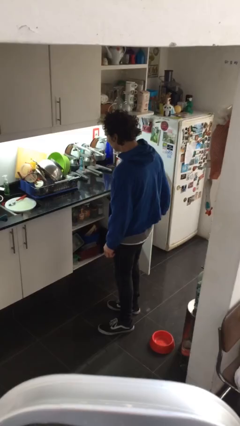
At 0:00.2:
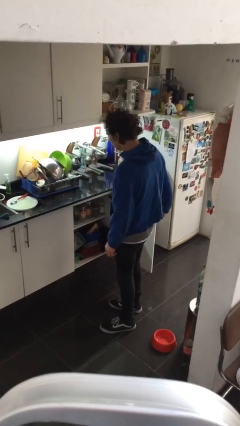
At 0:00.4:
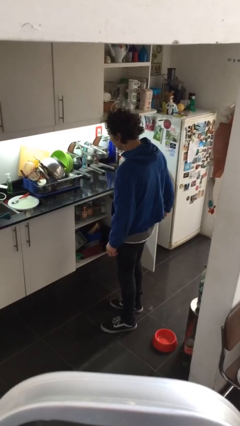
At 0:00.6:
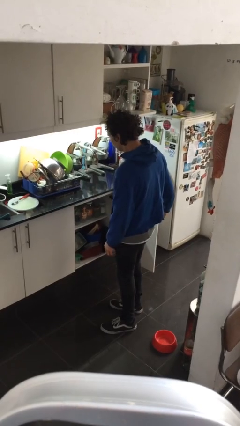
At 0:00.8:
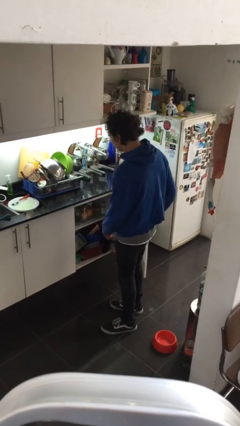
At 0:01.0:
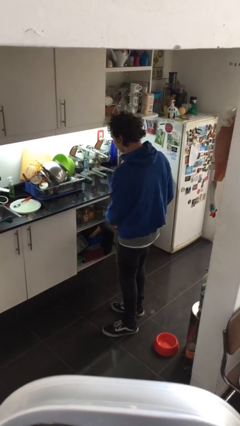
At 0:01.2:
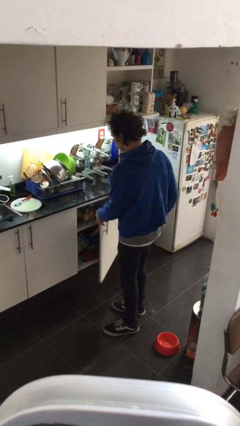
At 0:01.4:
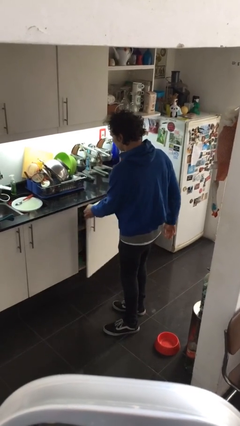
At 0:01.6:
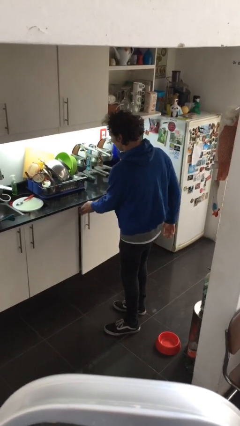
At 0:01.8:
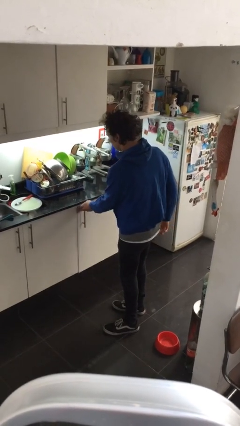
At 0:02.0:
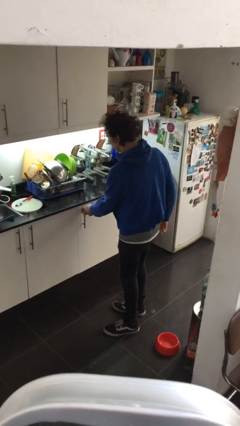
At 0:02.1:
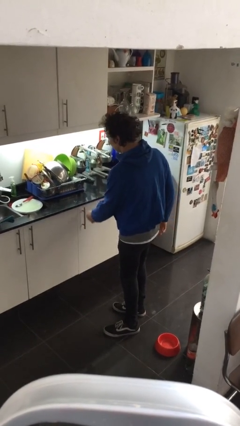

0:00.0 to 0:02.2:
person closes cabinet

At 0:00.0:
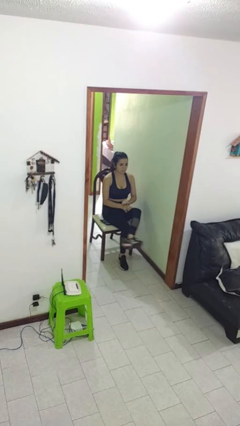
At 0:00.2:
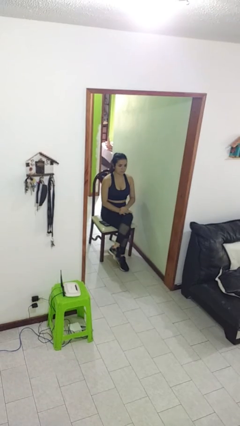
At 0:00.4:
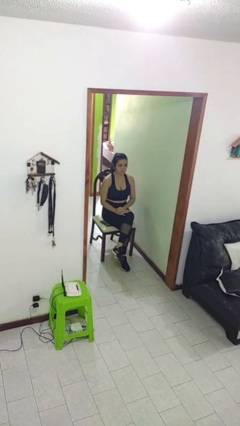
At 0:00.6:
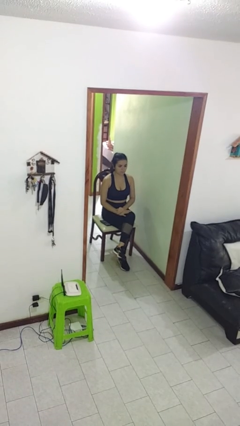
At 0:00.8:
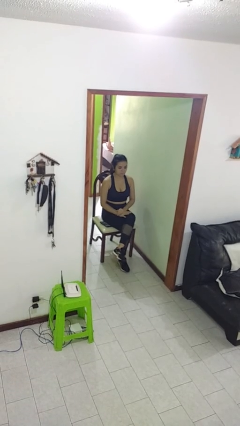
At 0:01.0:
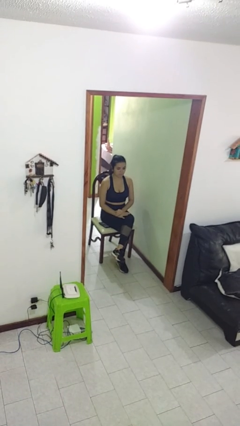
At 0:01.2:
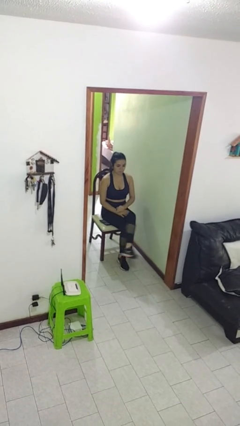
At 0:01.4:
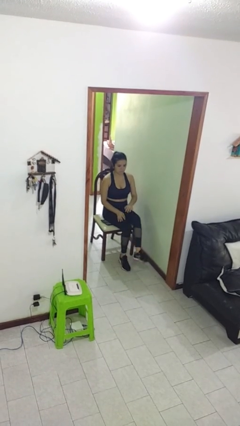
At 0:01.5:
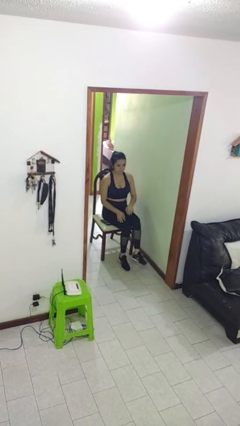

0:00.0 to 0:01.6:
person crosses legs

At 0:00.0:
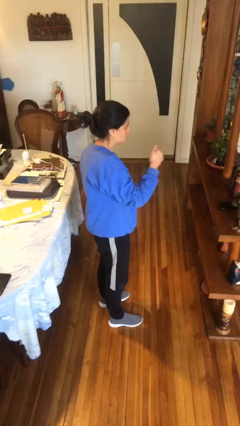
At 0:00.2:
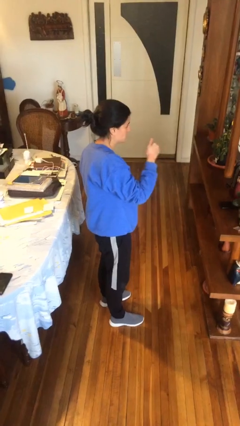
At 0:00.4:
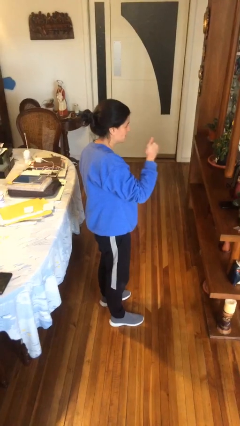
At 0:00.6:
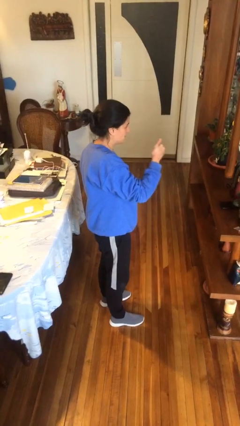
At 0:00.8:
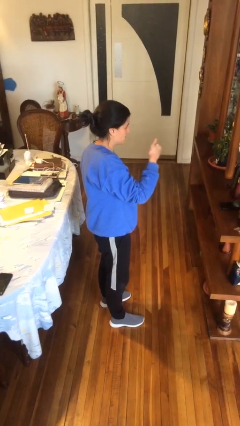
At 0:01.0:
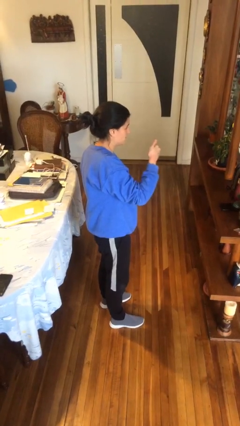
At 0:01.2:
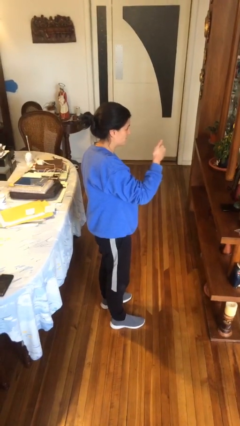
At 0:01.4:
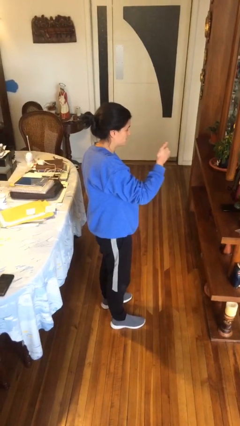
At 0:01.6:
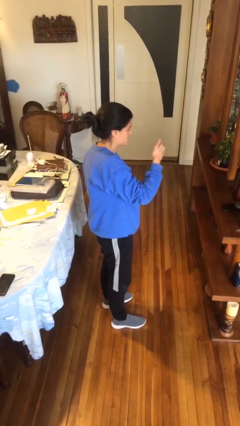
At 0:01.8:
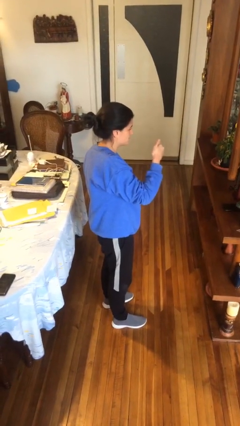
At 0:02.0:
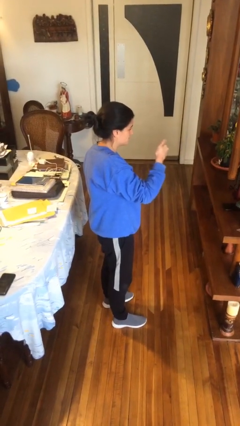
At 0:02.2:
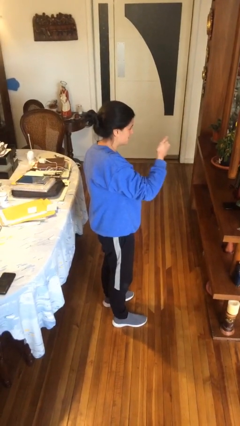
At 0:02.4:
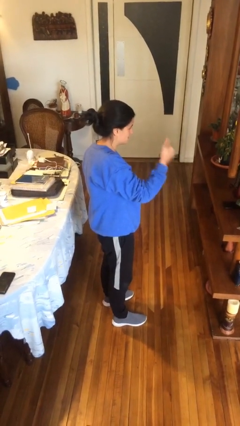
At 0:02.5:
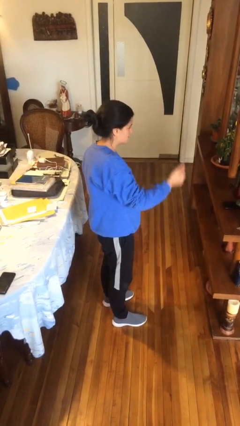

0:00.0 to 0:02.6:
person gestures thumbs up

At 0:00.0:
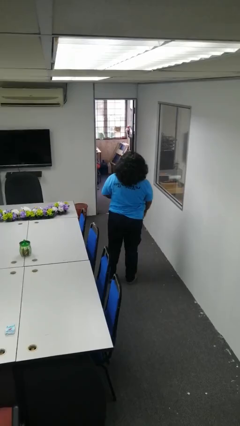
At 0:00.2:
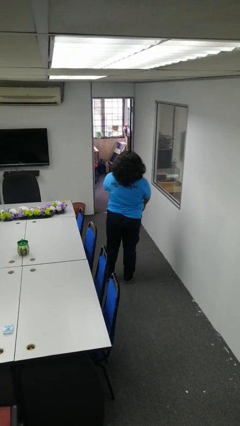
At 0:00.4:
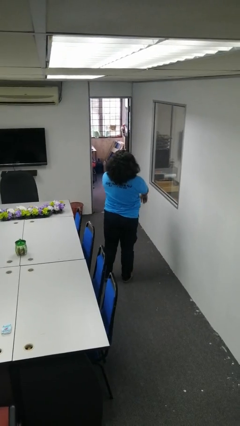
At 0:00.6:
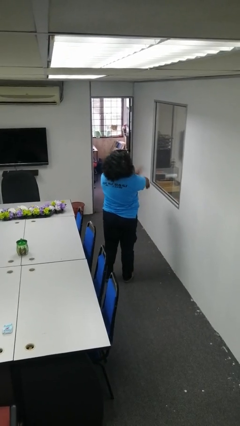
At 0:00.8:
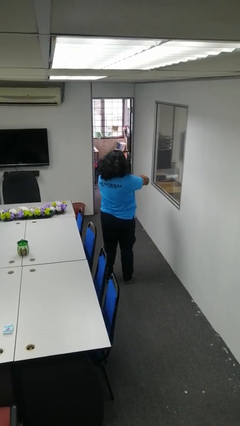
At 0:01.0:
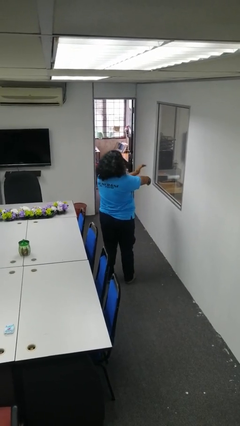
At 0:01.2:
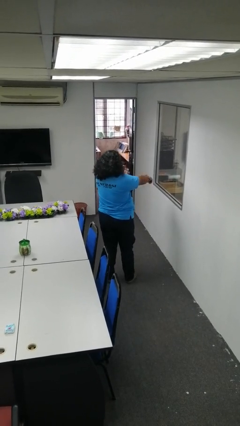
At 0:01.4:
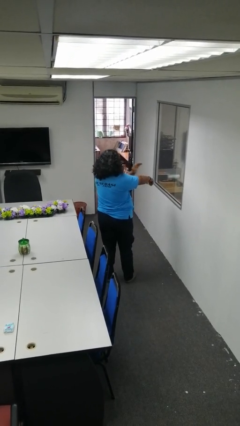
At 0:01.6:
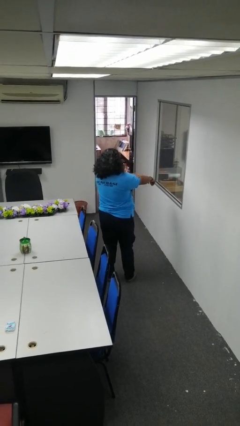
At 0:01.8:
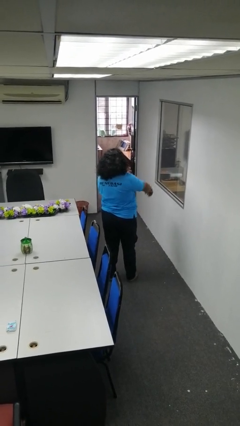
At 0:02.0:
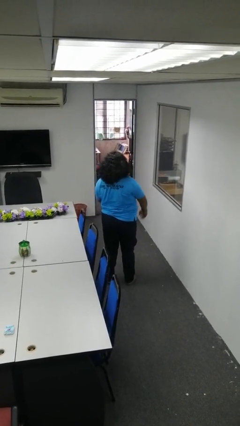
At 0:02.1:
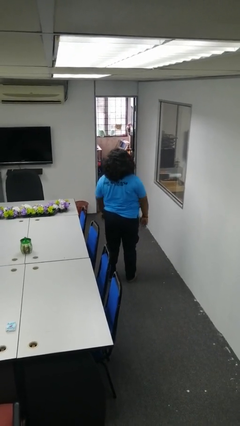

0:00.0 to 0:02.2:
person swats bug

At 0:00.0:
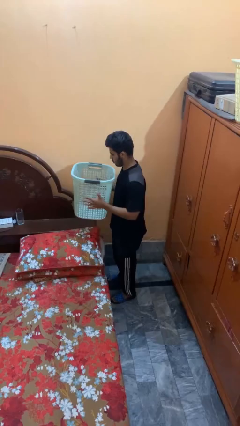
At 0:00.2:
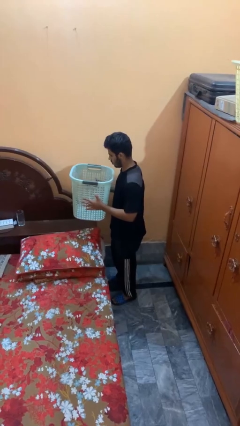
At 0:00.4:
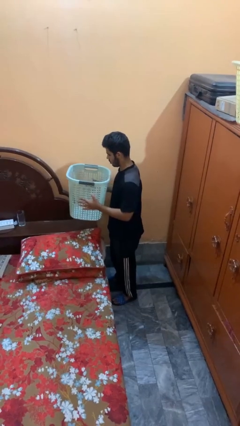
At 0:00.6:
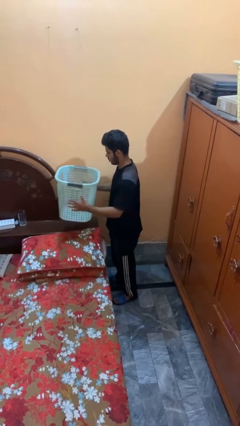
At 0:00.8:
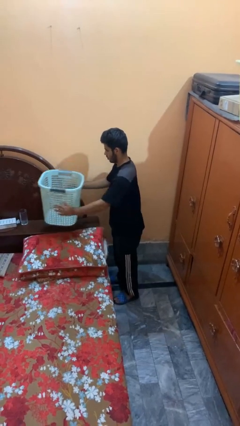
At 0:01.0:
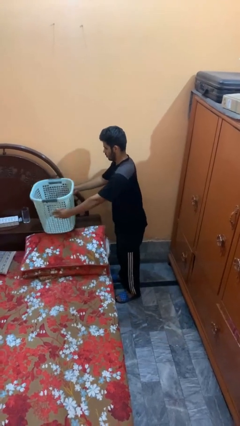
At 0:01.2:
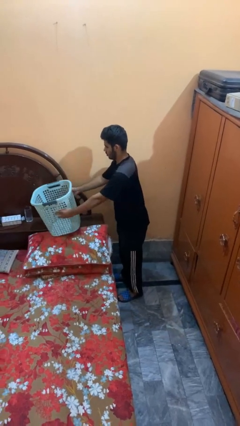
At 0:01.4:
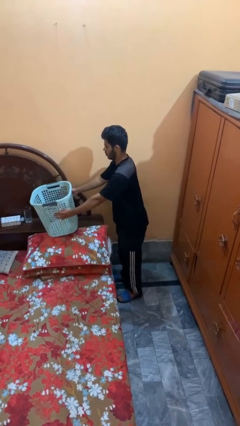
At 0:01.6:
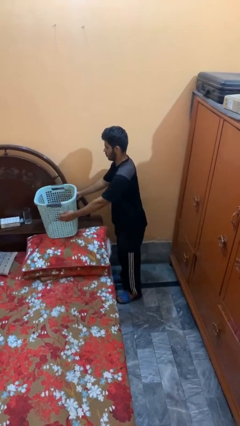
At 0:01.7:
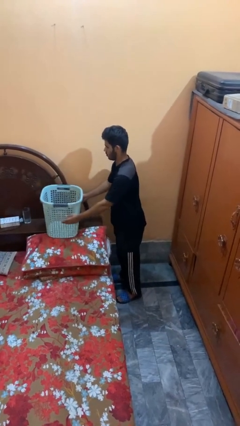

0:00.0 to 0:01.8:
person puts down object on bed

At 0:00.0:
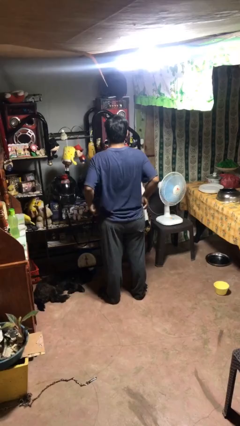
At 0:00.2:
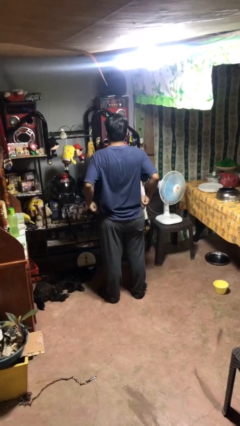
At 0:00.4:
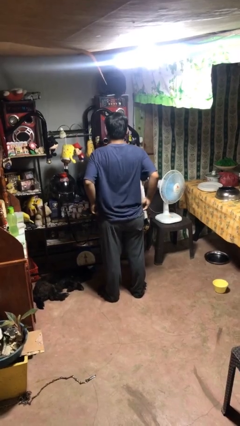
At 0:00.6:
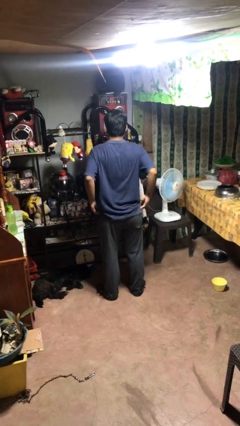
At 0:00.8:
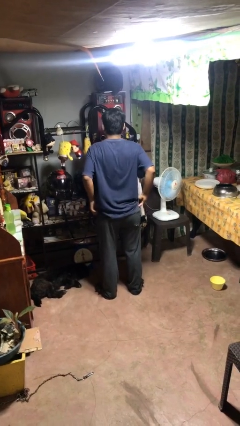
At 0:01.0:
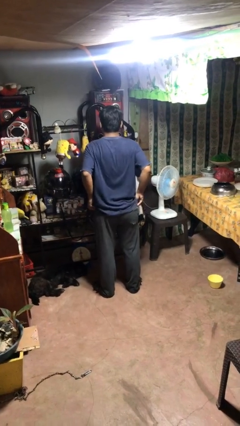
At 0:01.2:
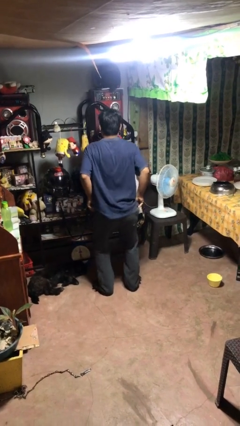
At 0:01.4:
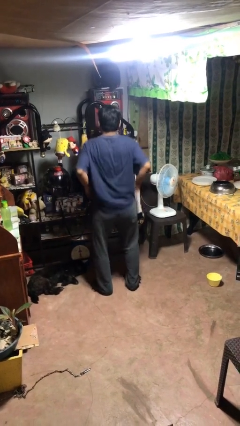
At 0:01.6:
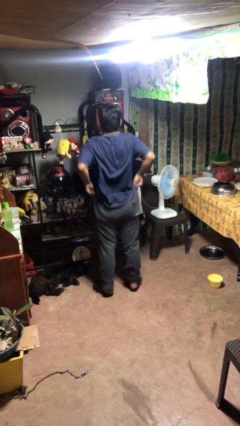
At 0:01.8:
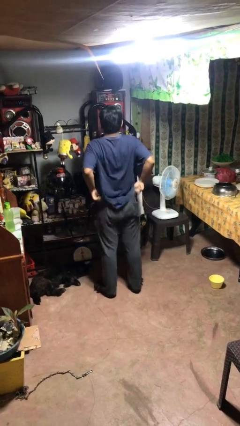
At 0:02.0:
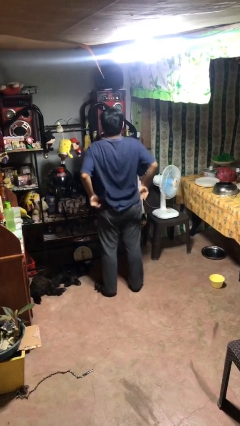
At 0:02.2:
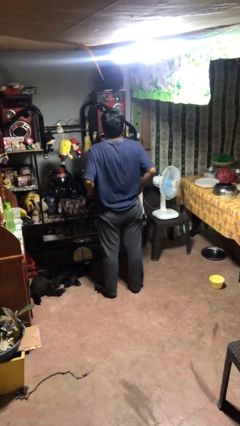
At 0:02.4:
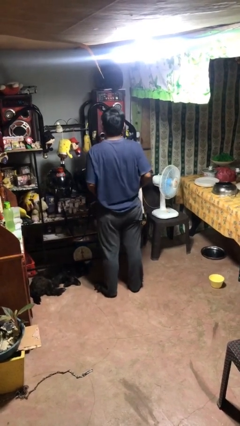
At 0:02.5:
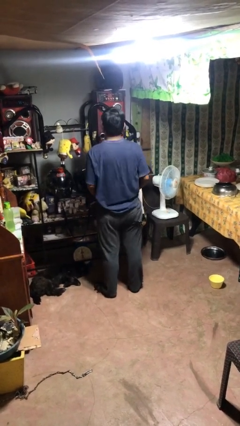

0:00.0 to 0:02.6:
person hikes up pants

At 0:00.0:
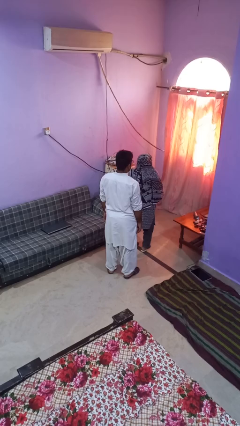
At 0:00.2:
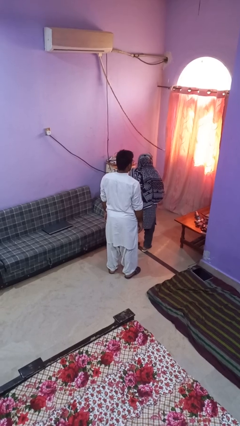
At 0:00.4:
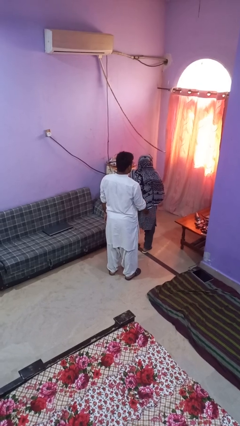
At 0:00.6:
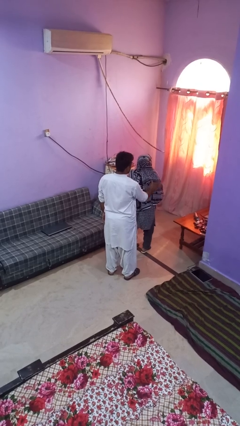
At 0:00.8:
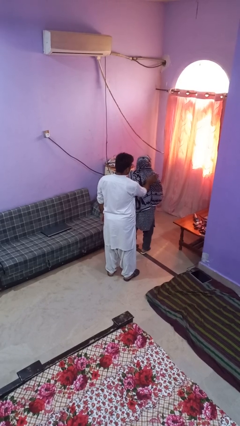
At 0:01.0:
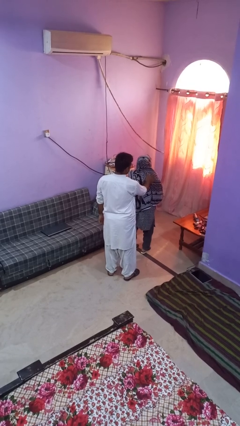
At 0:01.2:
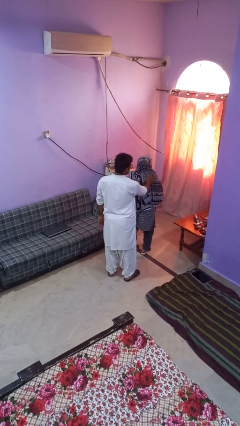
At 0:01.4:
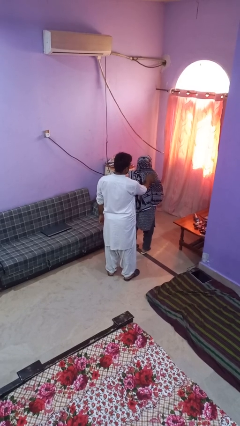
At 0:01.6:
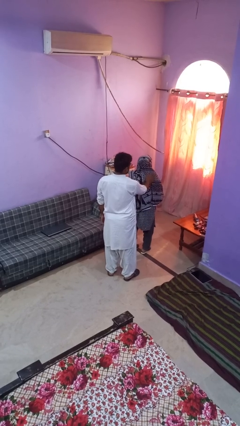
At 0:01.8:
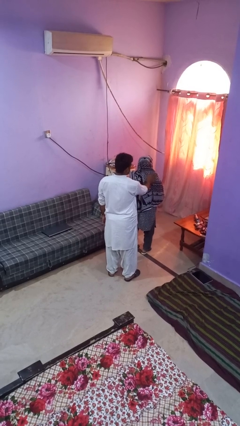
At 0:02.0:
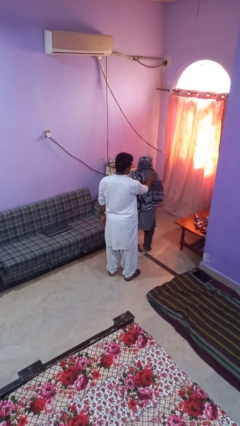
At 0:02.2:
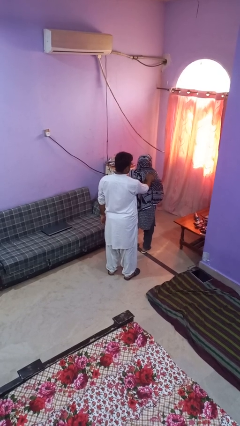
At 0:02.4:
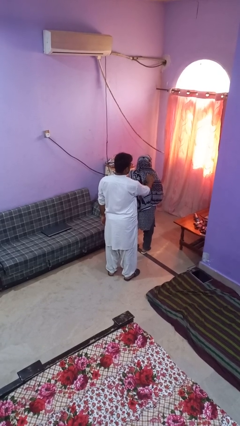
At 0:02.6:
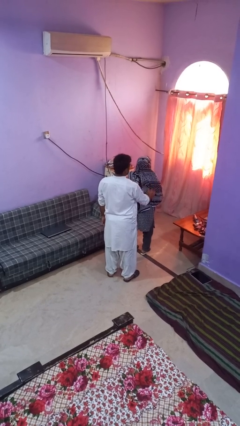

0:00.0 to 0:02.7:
person touches back of person

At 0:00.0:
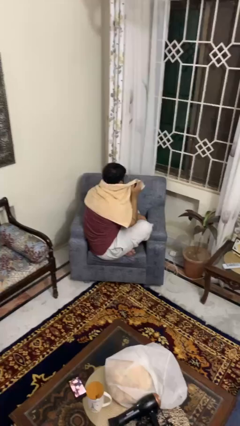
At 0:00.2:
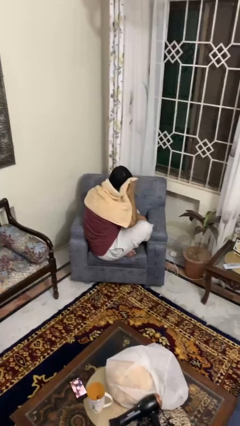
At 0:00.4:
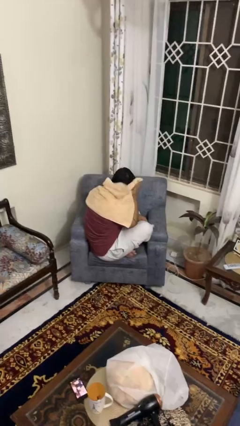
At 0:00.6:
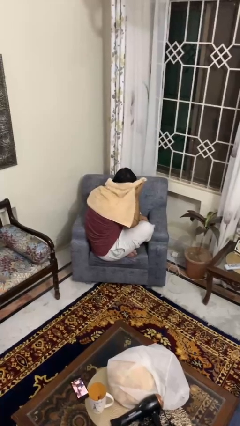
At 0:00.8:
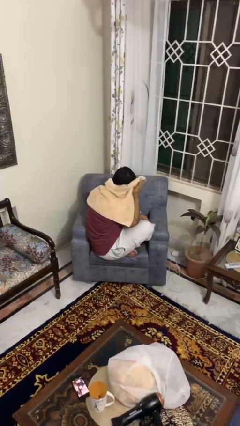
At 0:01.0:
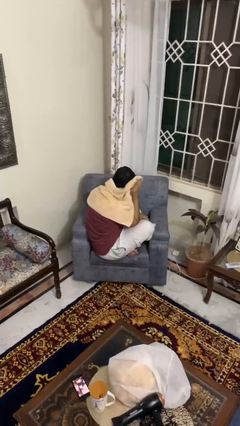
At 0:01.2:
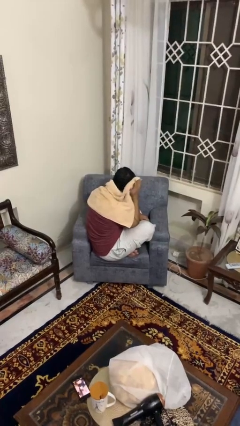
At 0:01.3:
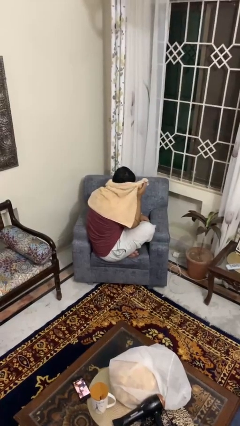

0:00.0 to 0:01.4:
person dries hair with towel
